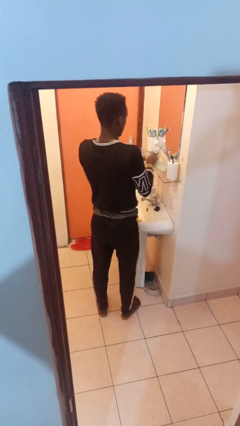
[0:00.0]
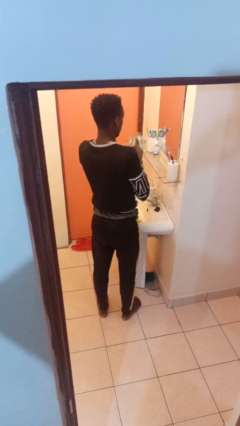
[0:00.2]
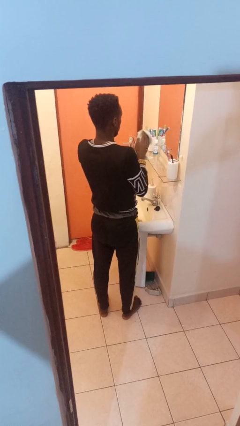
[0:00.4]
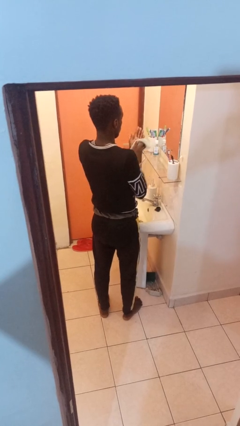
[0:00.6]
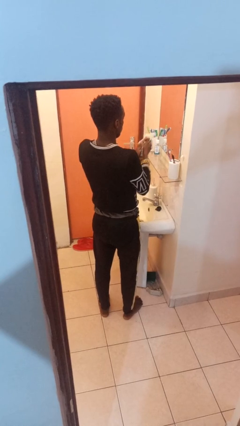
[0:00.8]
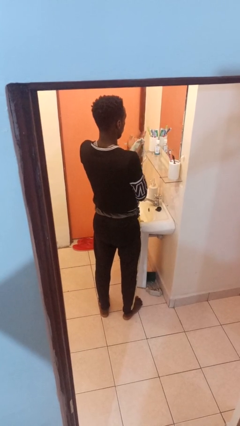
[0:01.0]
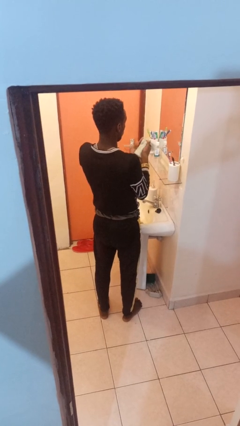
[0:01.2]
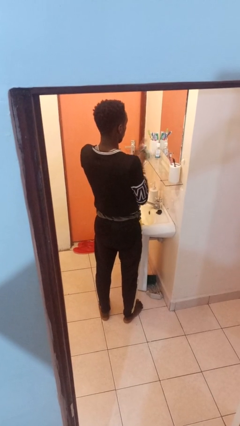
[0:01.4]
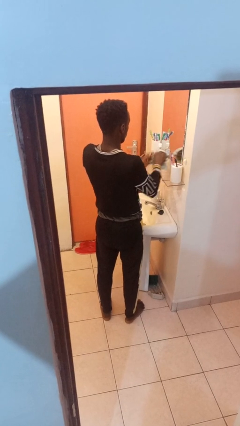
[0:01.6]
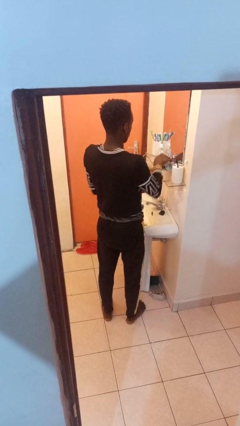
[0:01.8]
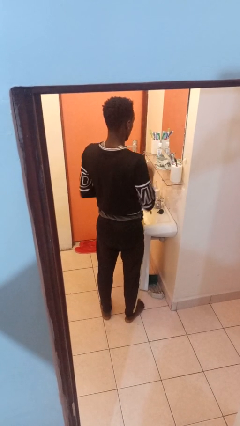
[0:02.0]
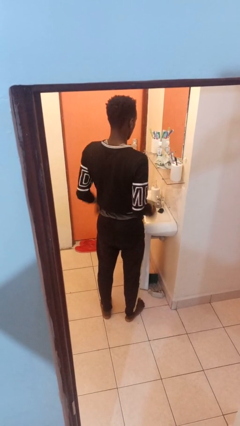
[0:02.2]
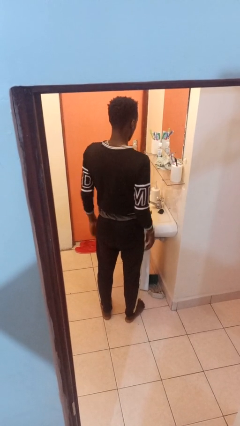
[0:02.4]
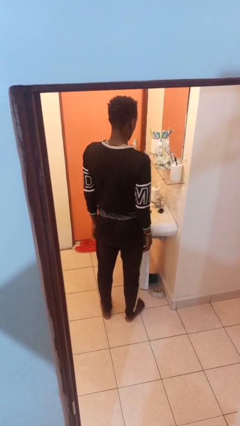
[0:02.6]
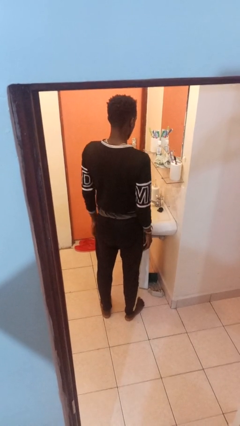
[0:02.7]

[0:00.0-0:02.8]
person dries hands with towel

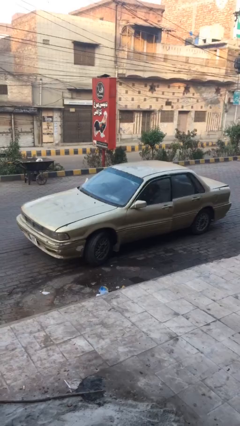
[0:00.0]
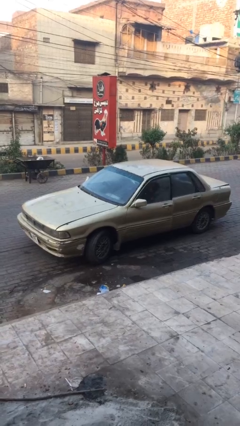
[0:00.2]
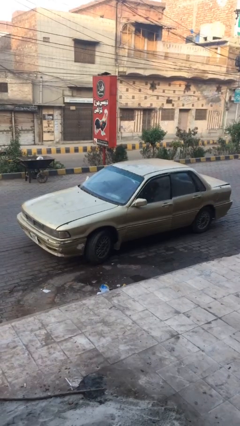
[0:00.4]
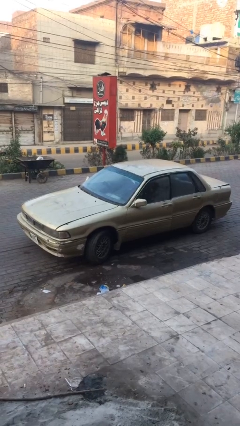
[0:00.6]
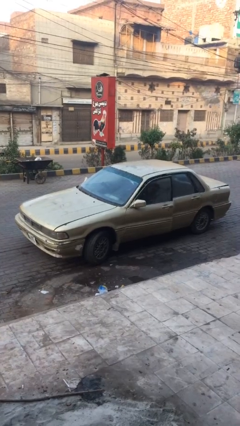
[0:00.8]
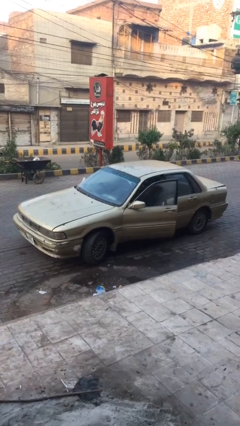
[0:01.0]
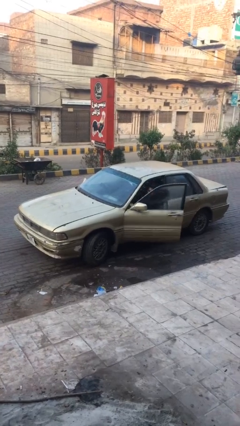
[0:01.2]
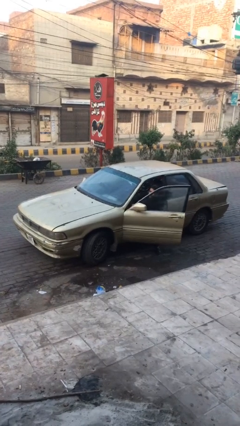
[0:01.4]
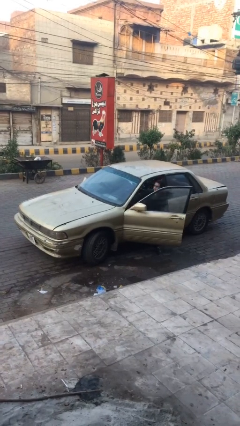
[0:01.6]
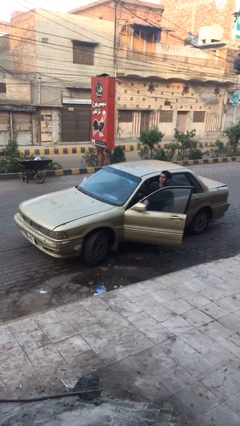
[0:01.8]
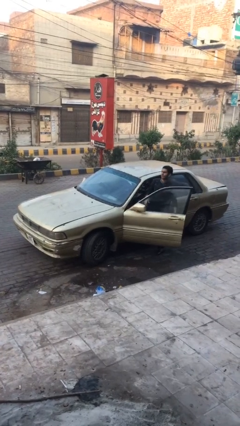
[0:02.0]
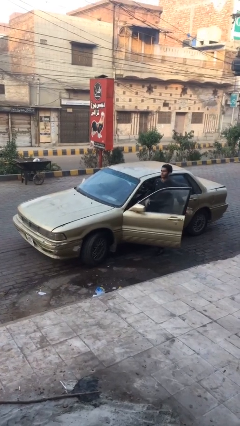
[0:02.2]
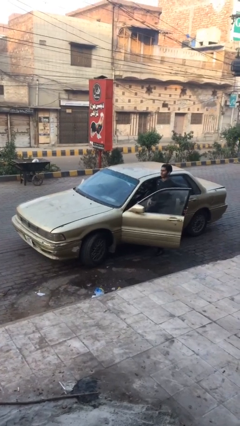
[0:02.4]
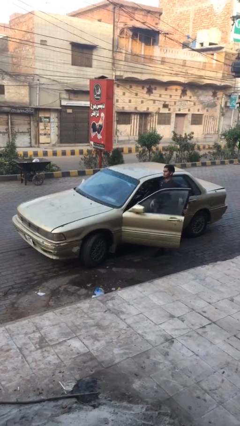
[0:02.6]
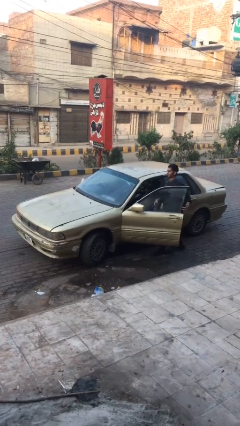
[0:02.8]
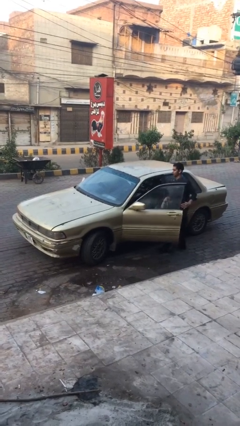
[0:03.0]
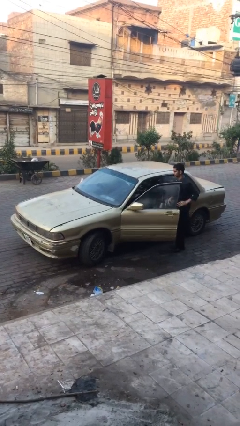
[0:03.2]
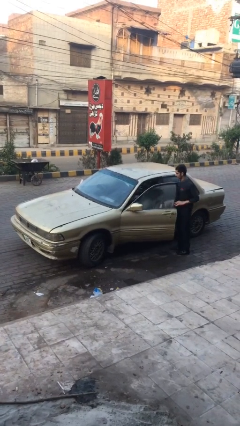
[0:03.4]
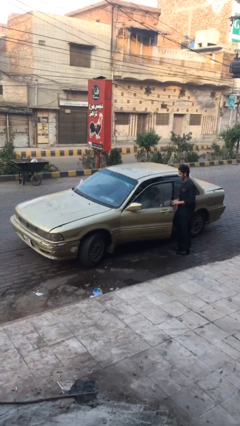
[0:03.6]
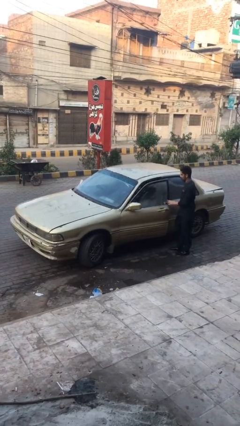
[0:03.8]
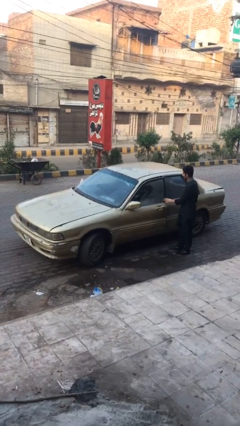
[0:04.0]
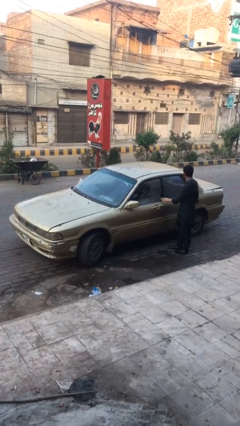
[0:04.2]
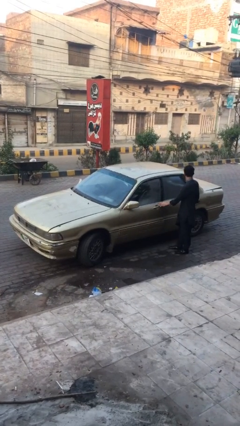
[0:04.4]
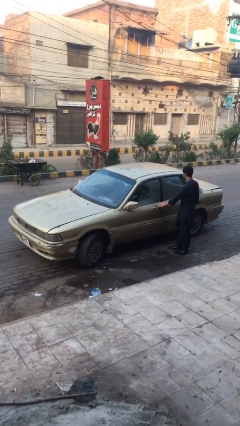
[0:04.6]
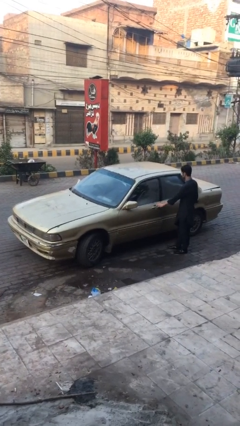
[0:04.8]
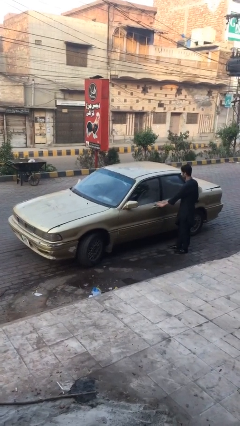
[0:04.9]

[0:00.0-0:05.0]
car drops off person

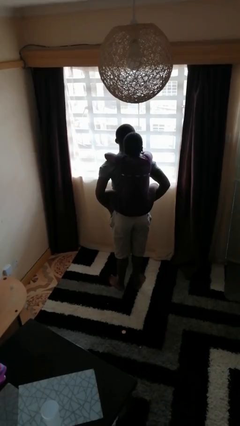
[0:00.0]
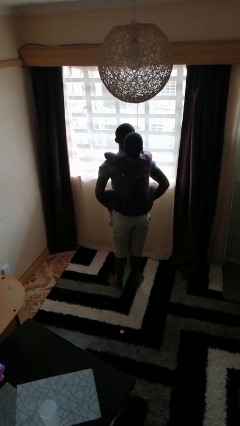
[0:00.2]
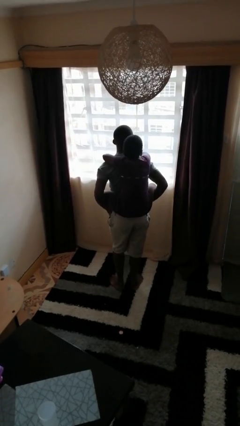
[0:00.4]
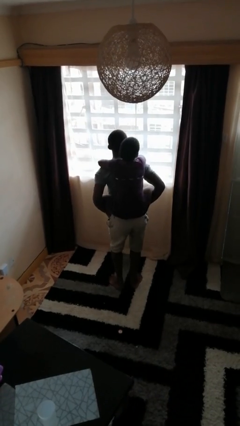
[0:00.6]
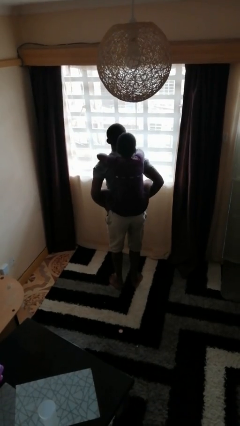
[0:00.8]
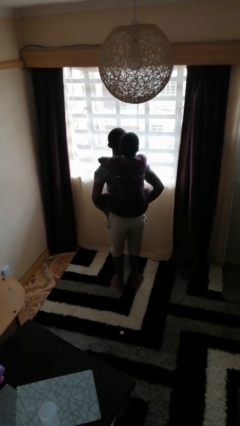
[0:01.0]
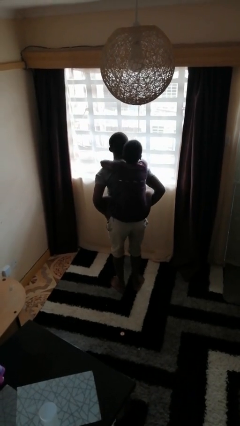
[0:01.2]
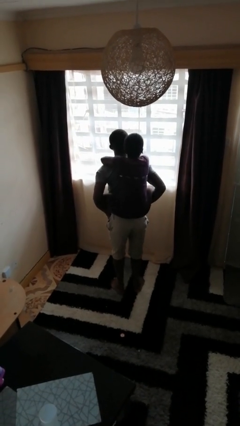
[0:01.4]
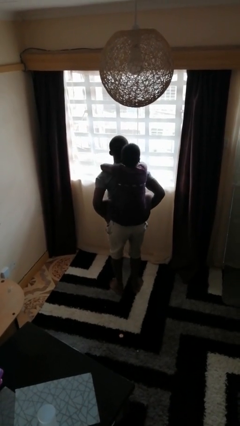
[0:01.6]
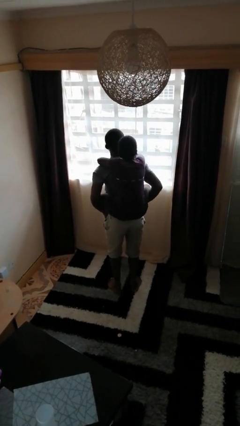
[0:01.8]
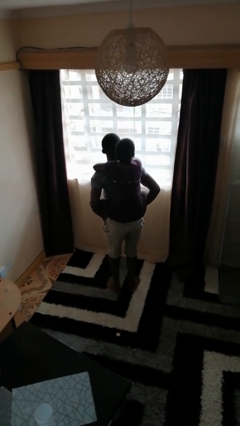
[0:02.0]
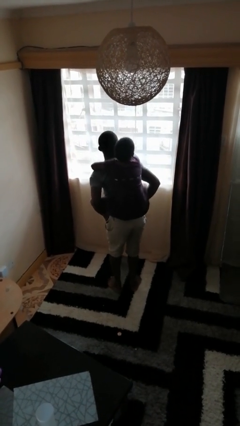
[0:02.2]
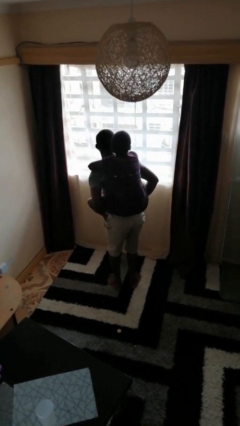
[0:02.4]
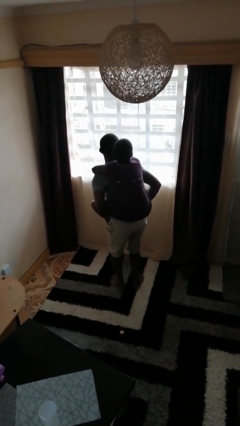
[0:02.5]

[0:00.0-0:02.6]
person carries person on back

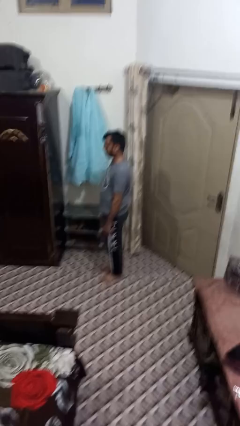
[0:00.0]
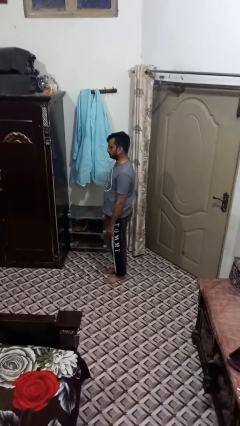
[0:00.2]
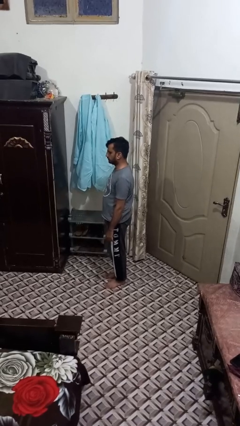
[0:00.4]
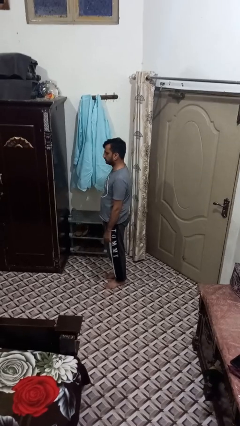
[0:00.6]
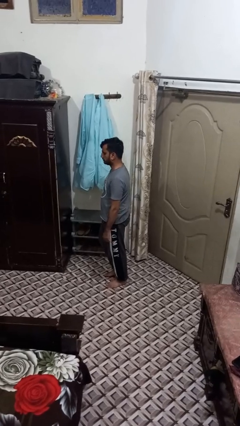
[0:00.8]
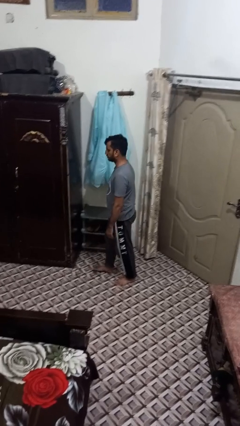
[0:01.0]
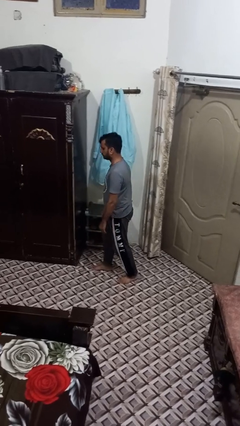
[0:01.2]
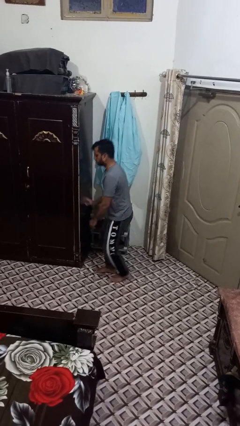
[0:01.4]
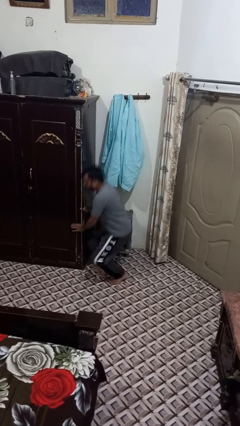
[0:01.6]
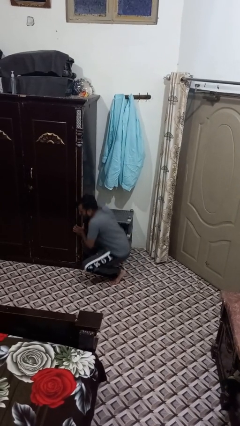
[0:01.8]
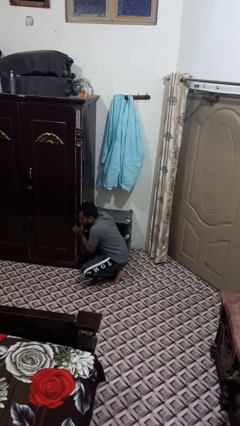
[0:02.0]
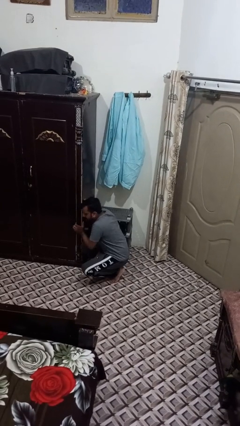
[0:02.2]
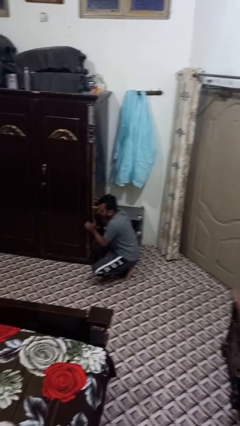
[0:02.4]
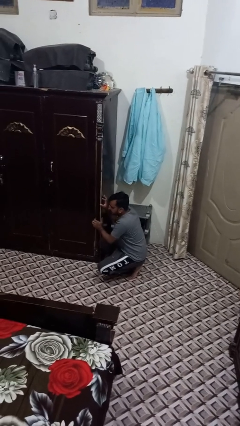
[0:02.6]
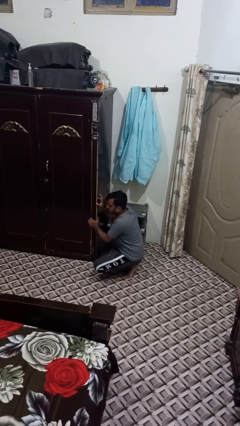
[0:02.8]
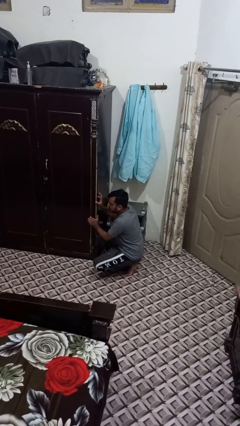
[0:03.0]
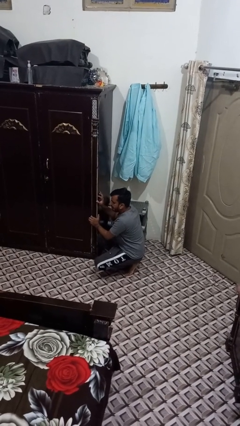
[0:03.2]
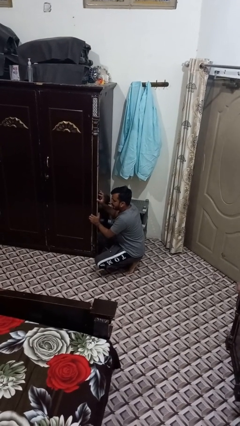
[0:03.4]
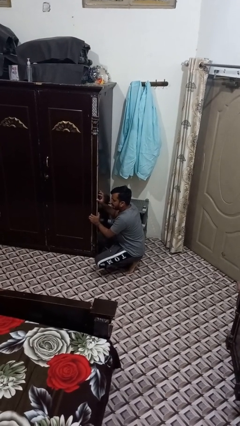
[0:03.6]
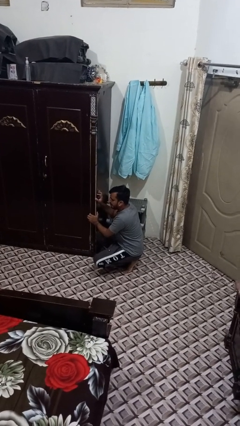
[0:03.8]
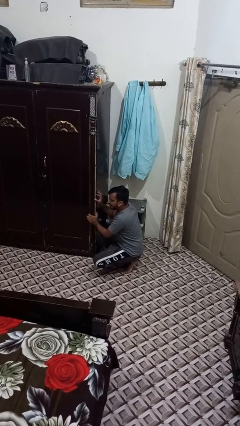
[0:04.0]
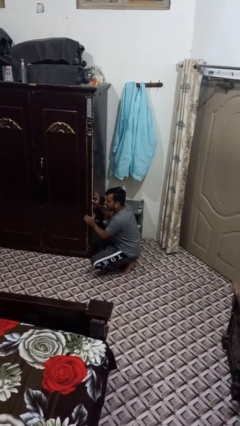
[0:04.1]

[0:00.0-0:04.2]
person trips on object on floor

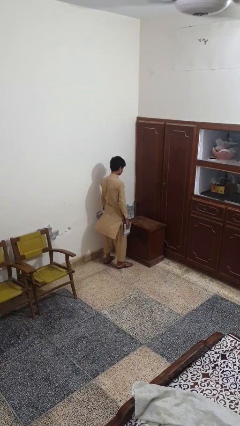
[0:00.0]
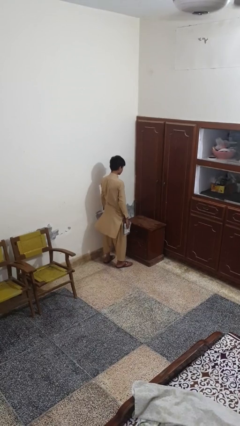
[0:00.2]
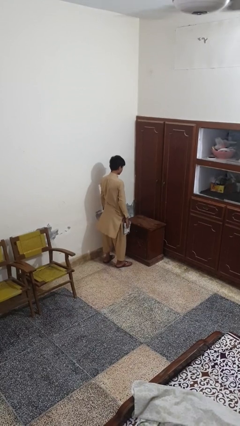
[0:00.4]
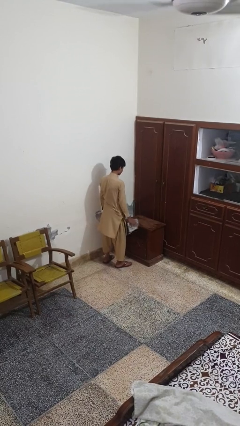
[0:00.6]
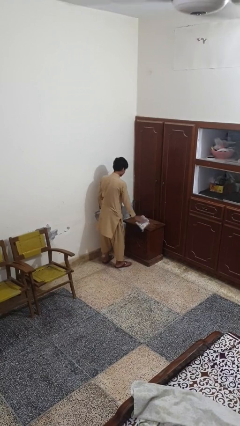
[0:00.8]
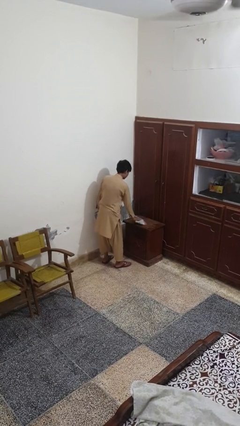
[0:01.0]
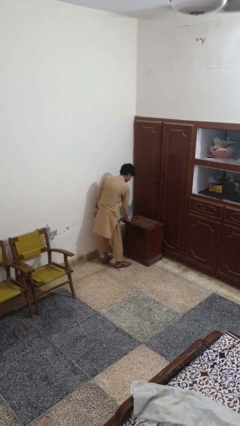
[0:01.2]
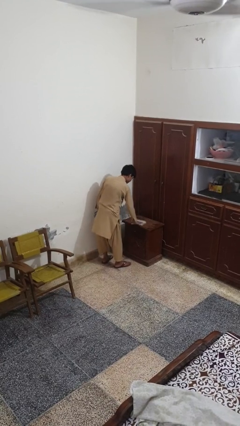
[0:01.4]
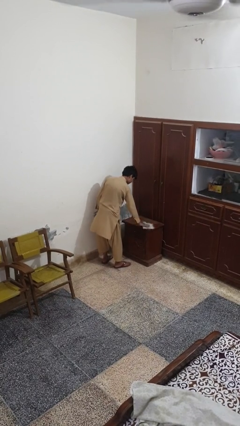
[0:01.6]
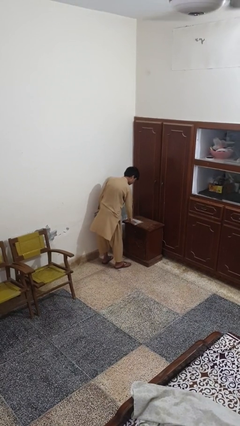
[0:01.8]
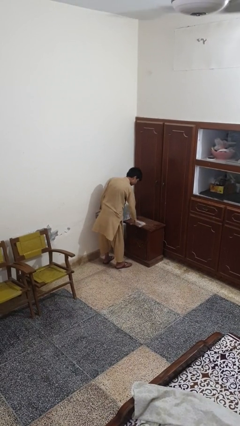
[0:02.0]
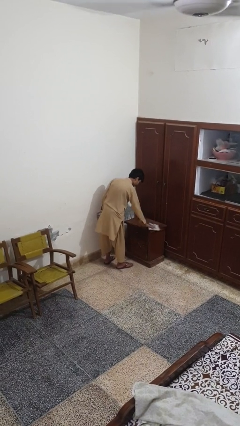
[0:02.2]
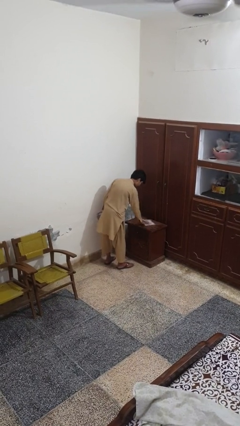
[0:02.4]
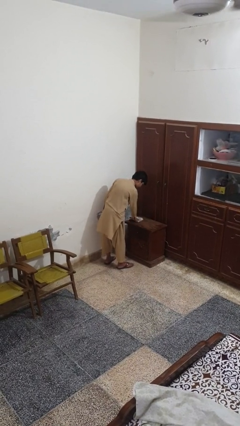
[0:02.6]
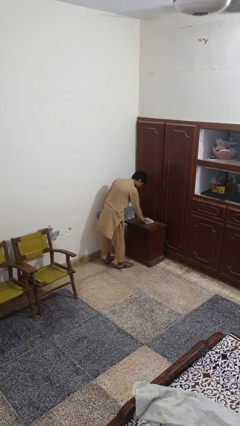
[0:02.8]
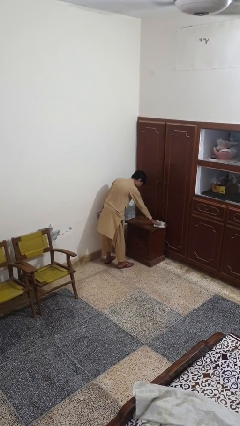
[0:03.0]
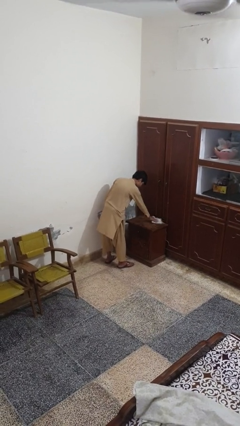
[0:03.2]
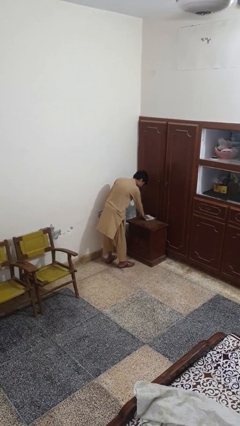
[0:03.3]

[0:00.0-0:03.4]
person cleans table with rag
